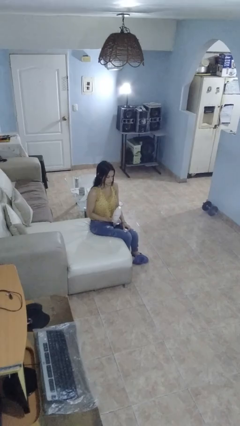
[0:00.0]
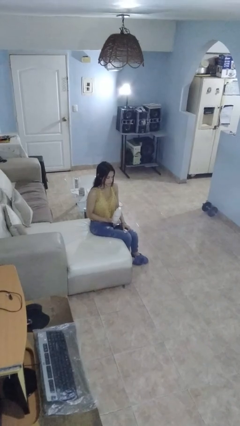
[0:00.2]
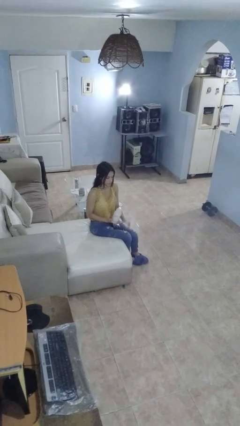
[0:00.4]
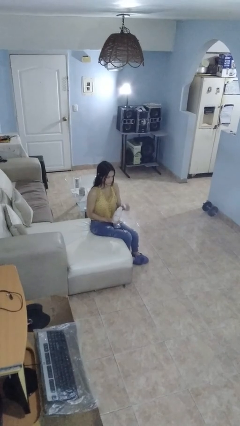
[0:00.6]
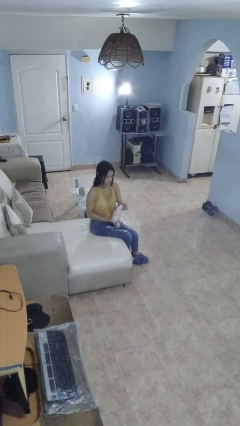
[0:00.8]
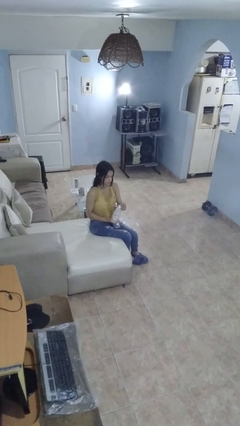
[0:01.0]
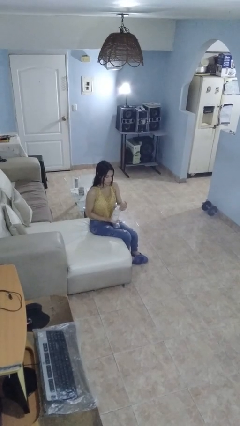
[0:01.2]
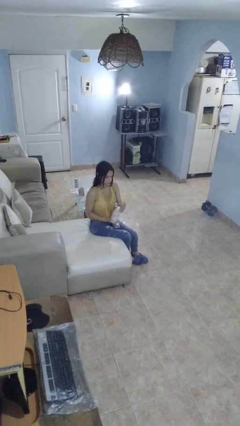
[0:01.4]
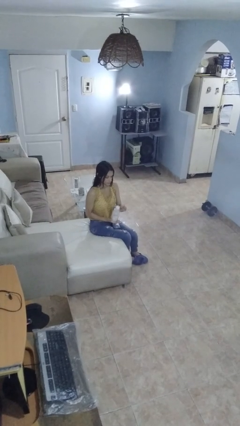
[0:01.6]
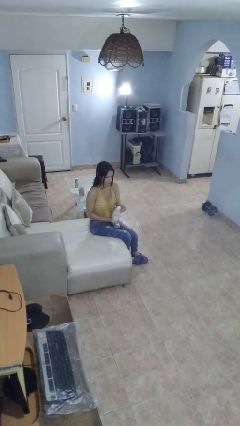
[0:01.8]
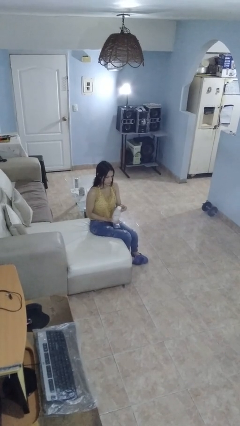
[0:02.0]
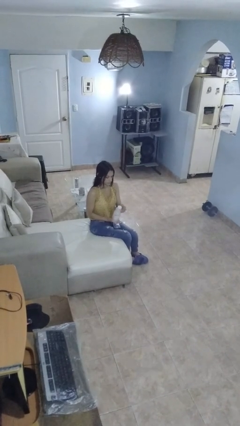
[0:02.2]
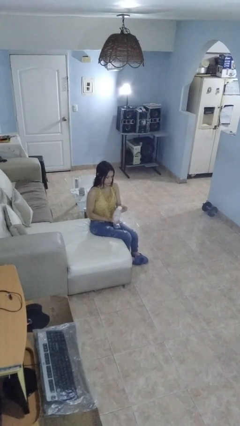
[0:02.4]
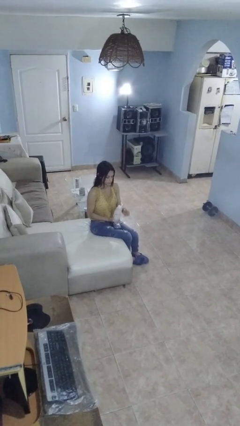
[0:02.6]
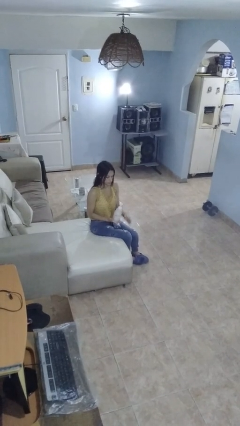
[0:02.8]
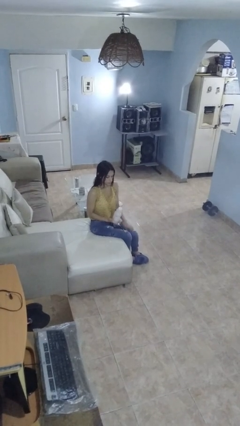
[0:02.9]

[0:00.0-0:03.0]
person screws lid to bottle

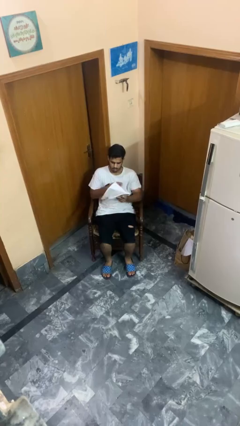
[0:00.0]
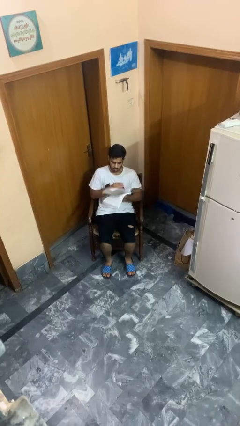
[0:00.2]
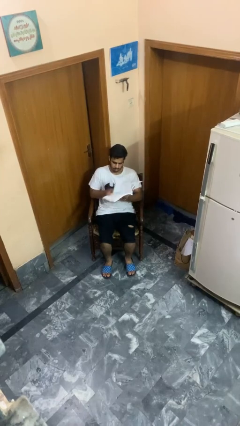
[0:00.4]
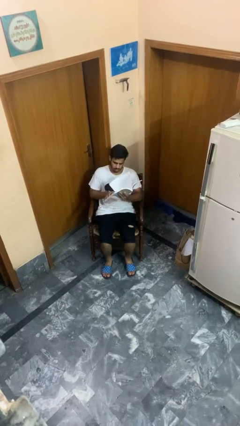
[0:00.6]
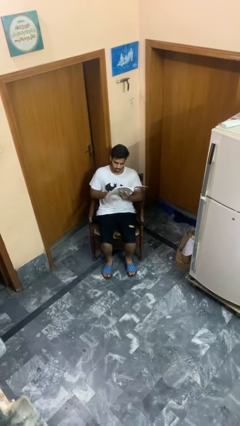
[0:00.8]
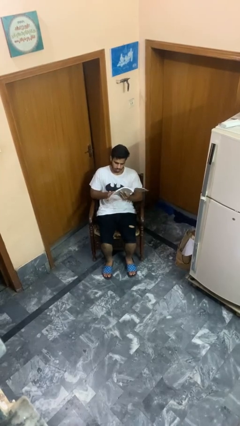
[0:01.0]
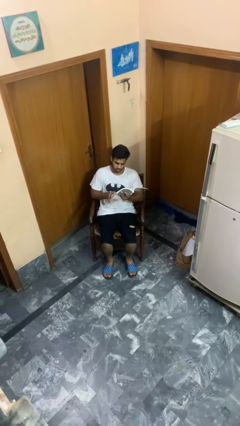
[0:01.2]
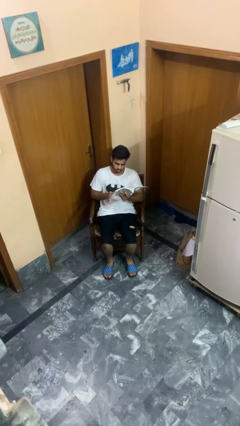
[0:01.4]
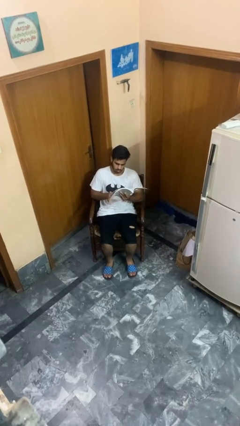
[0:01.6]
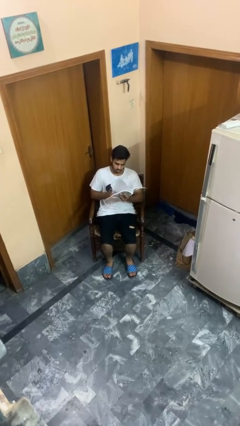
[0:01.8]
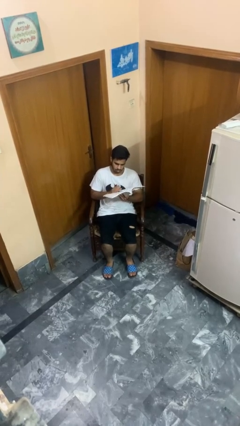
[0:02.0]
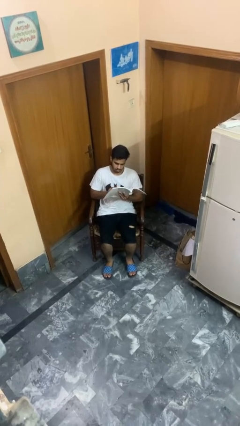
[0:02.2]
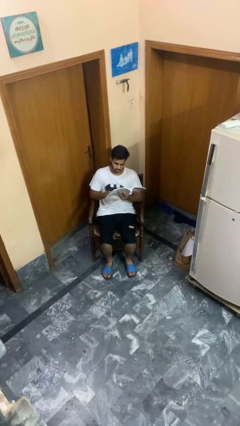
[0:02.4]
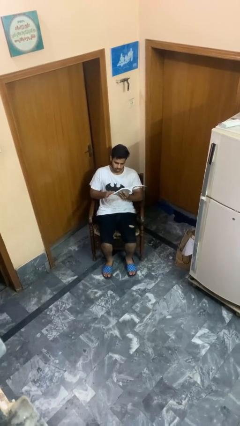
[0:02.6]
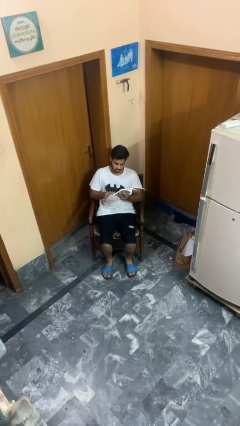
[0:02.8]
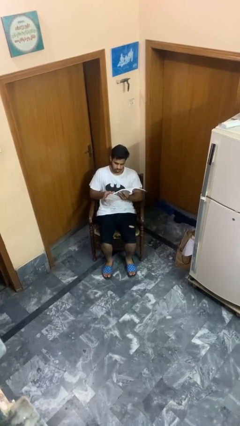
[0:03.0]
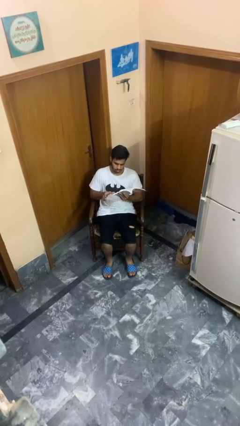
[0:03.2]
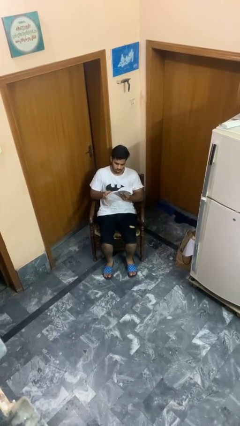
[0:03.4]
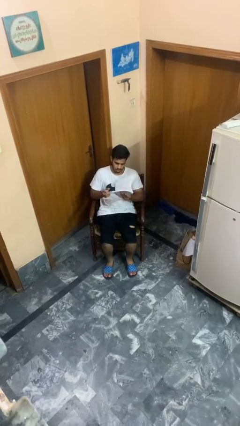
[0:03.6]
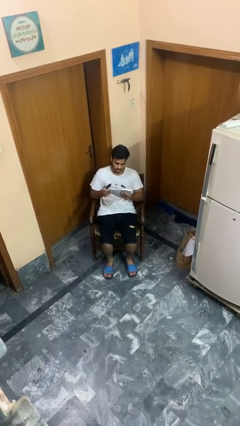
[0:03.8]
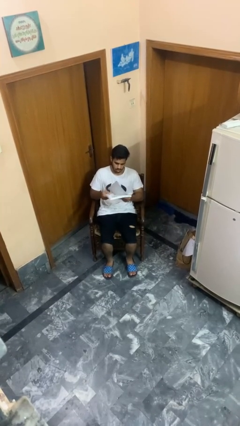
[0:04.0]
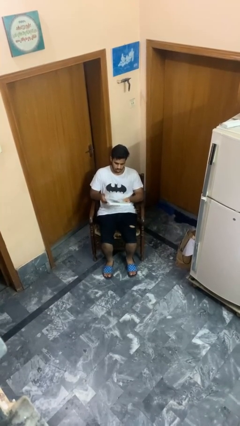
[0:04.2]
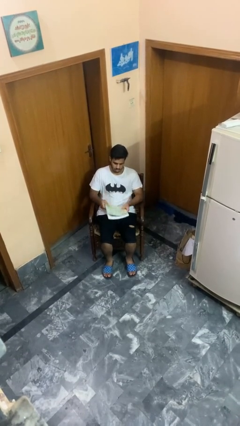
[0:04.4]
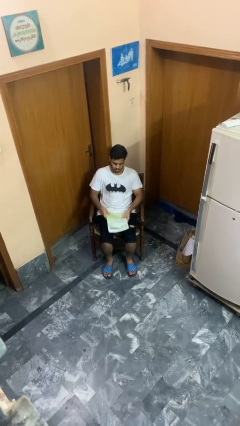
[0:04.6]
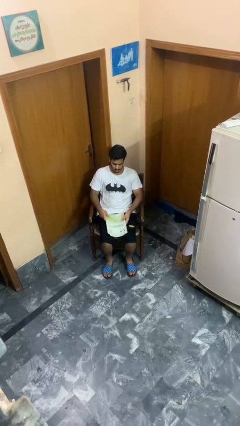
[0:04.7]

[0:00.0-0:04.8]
person reads book

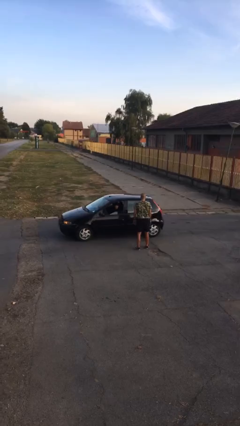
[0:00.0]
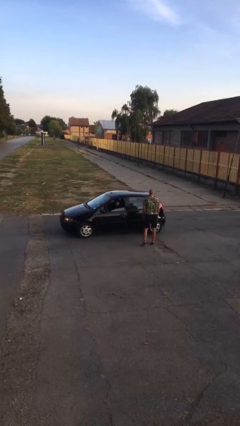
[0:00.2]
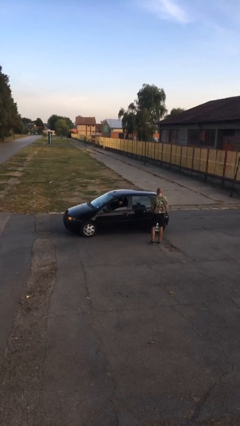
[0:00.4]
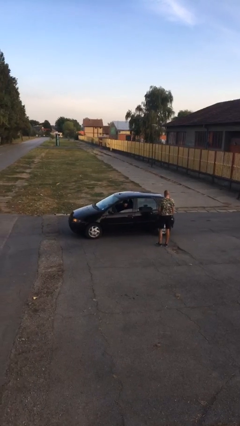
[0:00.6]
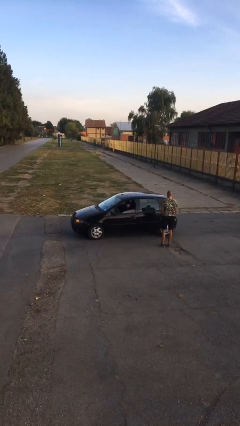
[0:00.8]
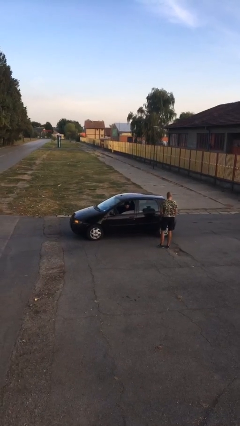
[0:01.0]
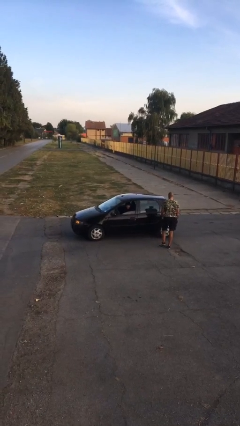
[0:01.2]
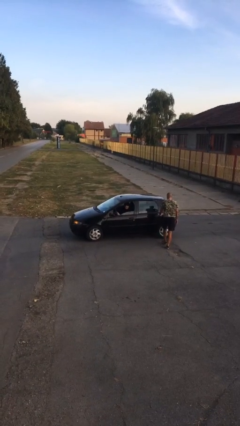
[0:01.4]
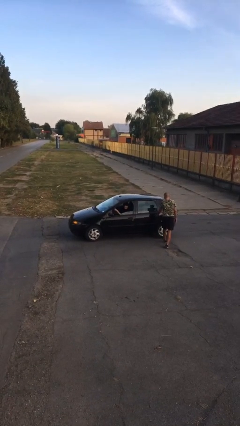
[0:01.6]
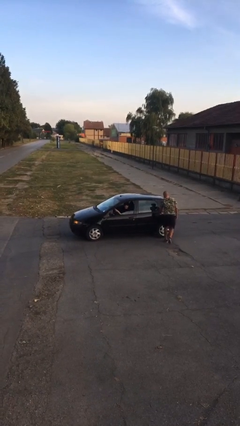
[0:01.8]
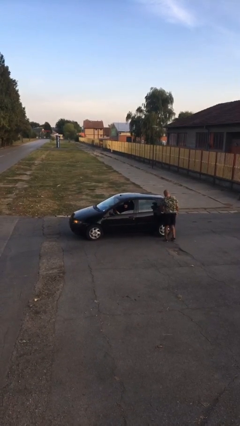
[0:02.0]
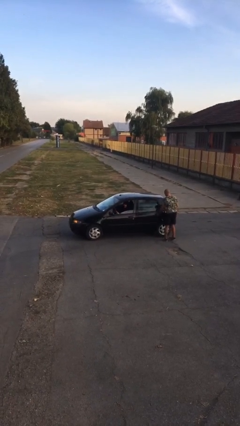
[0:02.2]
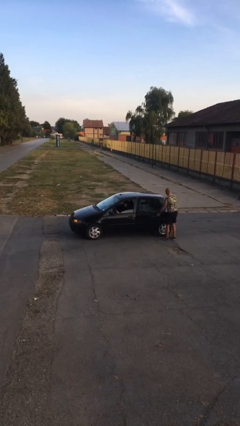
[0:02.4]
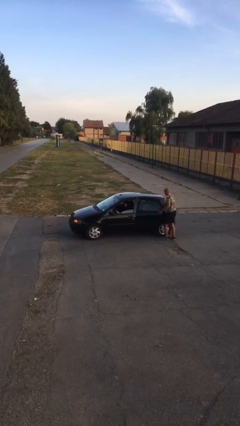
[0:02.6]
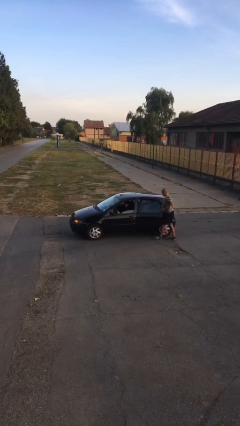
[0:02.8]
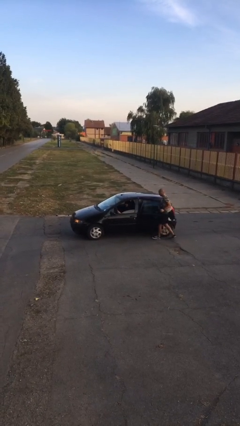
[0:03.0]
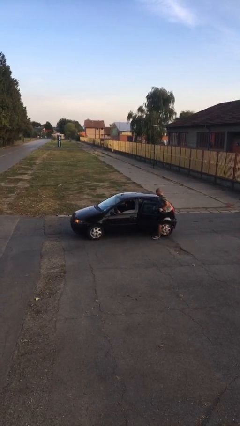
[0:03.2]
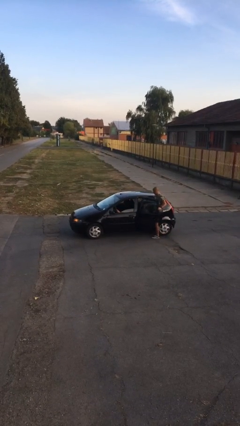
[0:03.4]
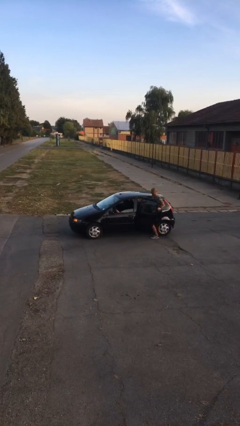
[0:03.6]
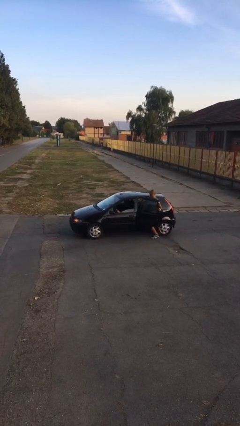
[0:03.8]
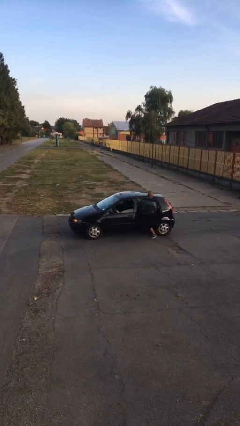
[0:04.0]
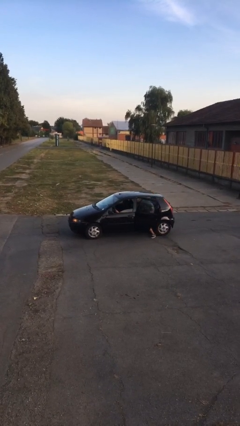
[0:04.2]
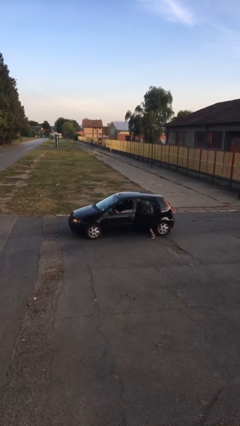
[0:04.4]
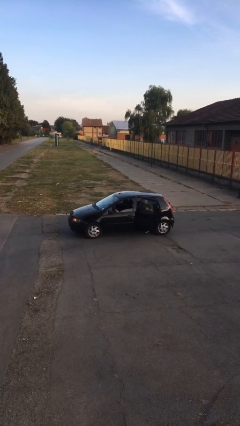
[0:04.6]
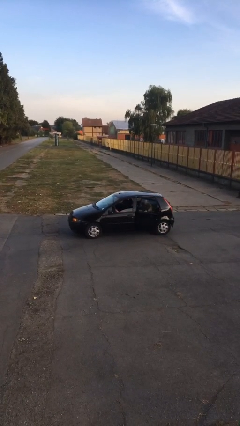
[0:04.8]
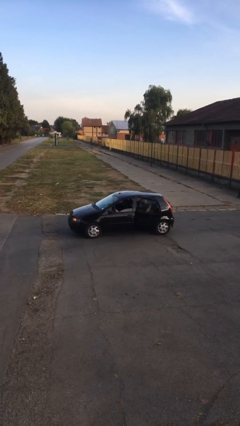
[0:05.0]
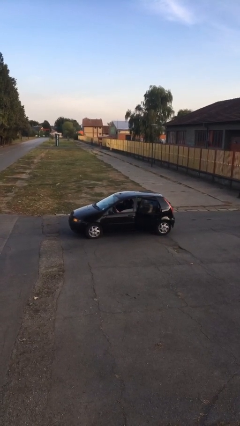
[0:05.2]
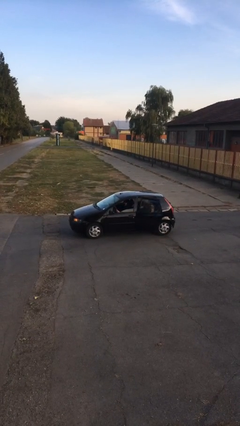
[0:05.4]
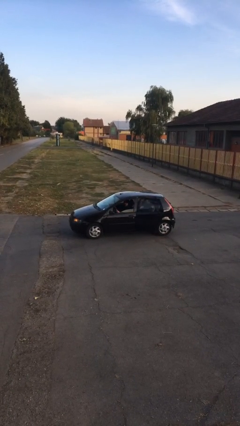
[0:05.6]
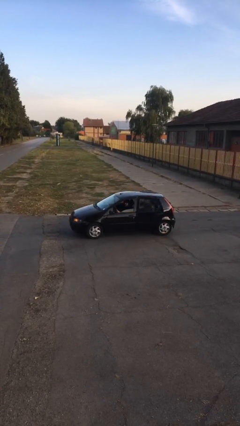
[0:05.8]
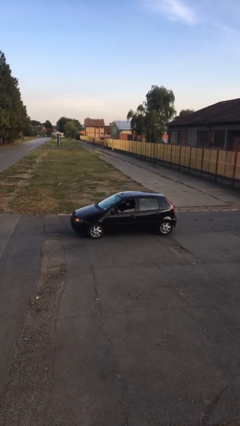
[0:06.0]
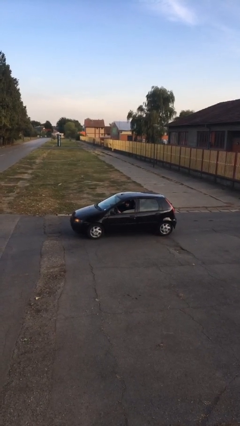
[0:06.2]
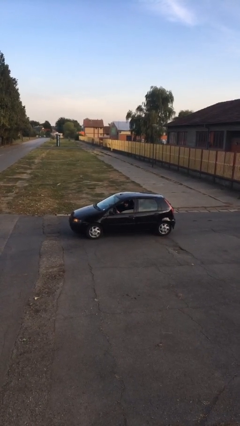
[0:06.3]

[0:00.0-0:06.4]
car picks up person

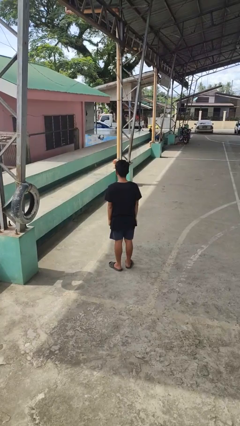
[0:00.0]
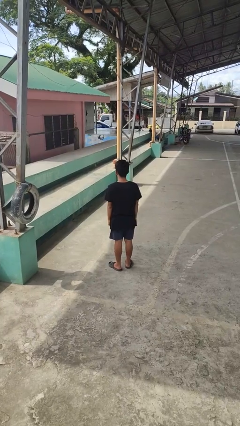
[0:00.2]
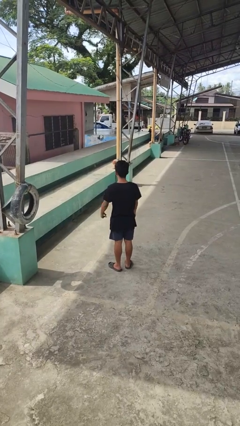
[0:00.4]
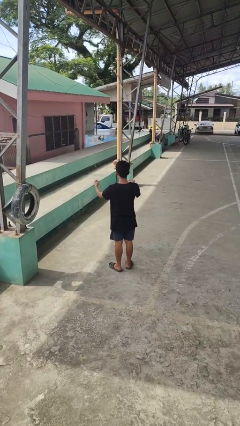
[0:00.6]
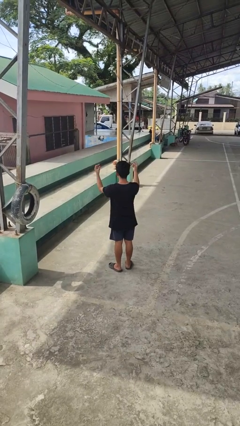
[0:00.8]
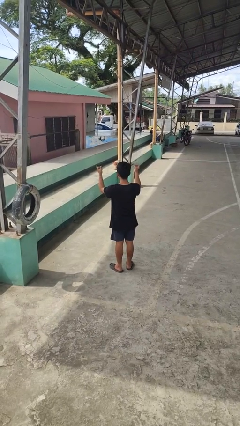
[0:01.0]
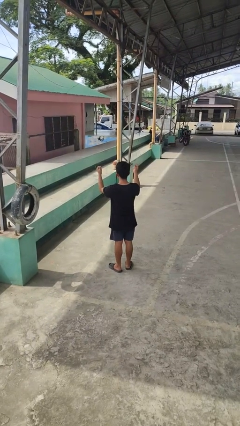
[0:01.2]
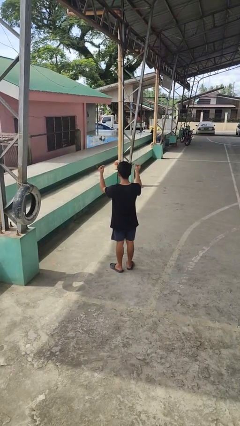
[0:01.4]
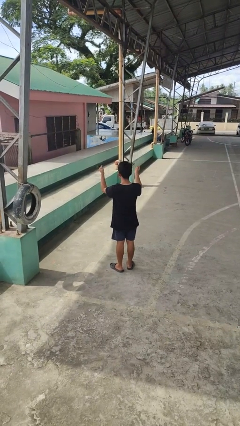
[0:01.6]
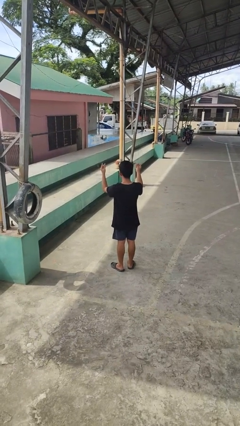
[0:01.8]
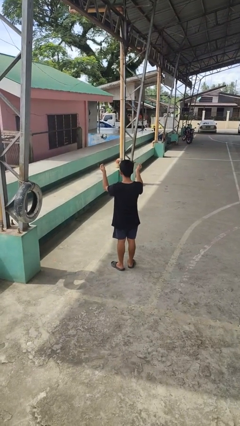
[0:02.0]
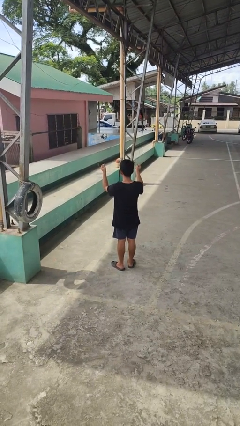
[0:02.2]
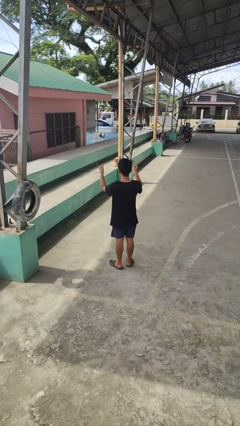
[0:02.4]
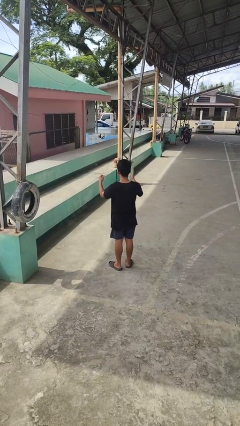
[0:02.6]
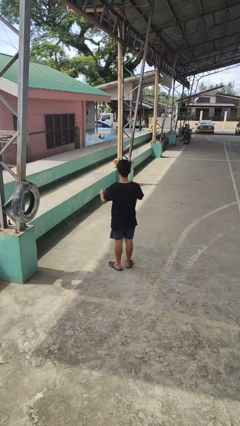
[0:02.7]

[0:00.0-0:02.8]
person snaps fingers

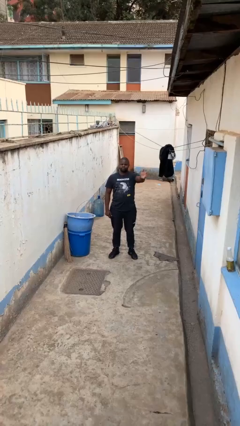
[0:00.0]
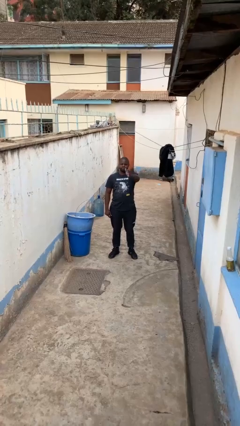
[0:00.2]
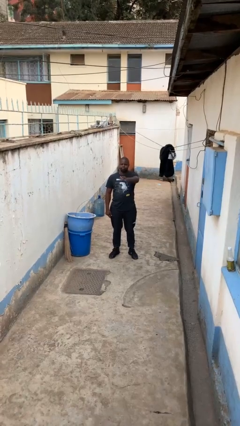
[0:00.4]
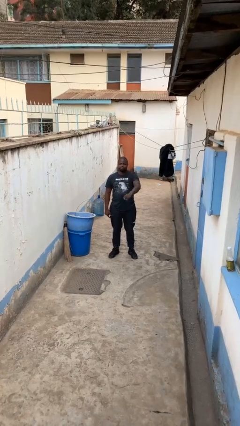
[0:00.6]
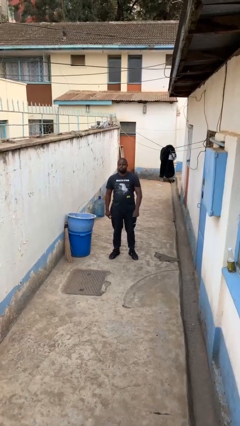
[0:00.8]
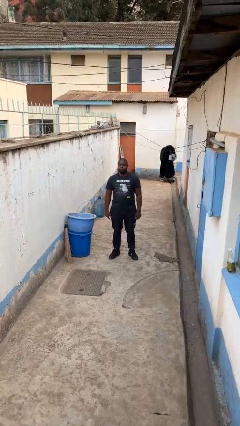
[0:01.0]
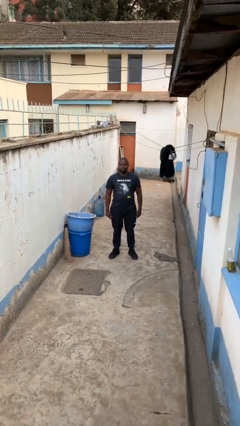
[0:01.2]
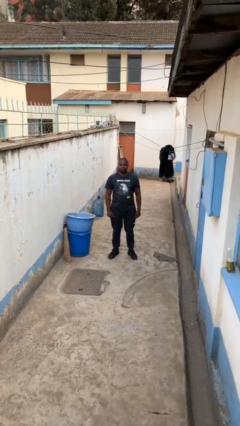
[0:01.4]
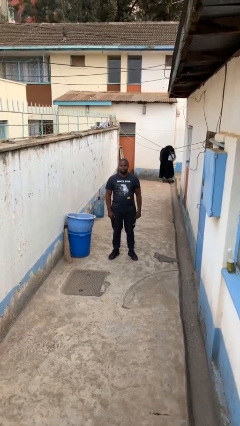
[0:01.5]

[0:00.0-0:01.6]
person gestures swipe right
